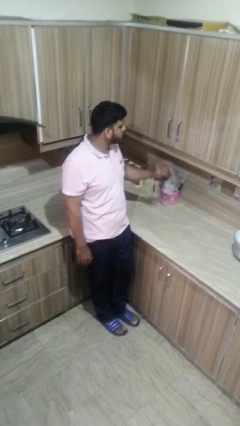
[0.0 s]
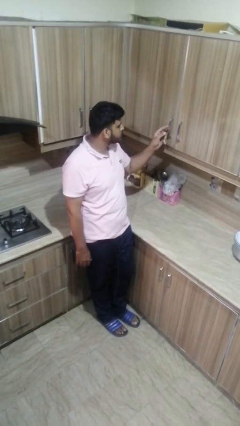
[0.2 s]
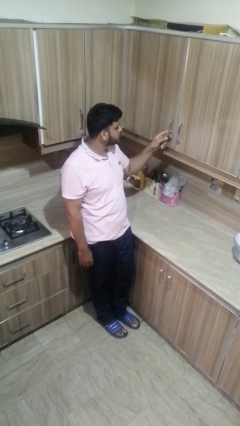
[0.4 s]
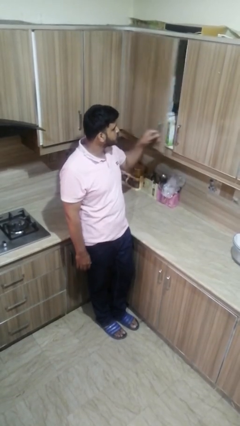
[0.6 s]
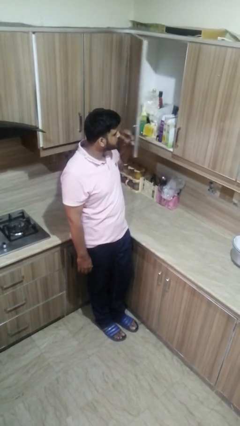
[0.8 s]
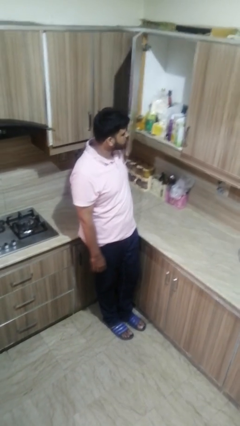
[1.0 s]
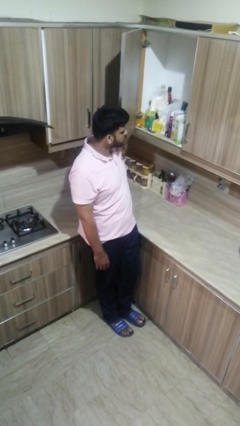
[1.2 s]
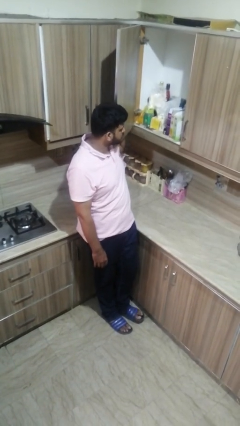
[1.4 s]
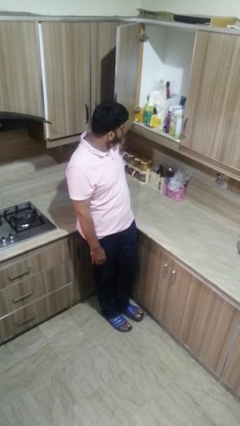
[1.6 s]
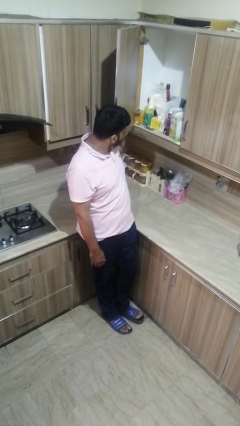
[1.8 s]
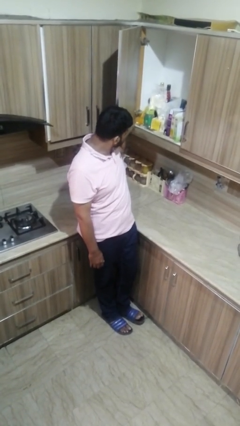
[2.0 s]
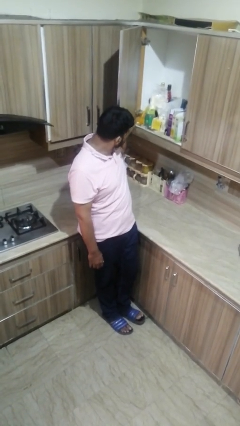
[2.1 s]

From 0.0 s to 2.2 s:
person opens cabinet

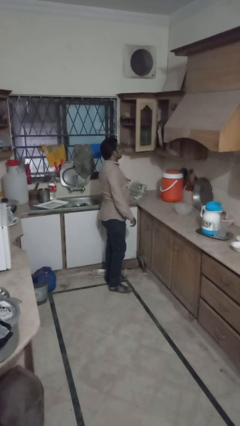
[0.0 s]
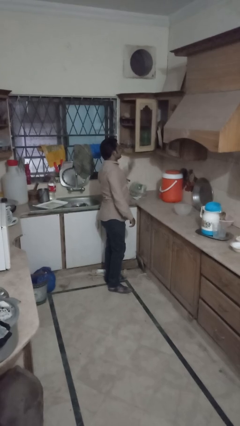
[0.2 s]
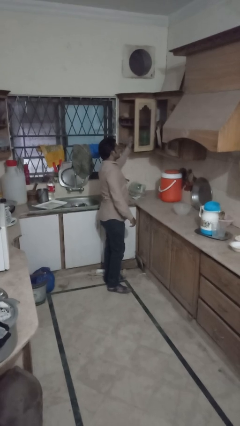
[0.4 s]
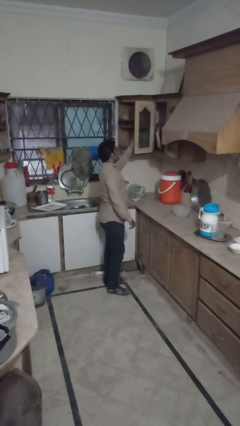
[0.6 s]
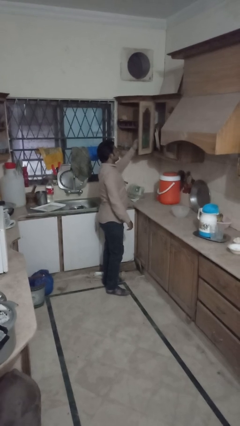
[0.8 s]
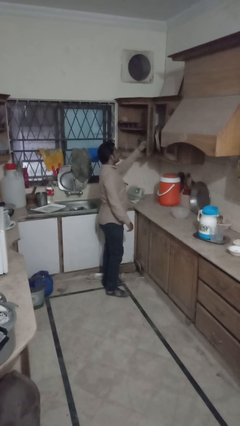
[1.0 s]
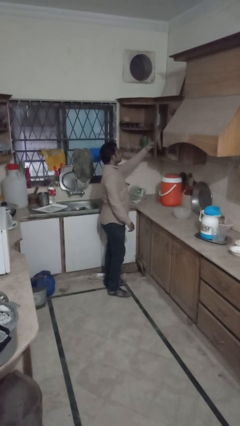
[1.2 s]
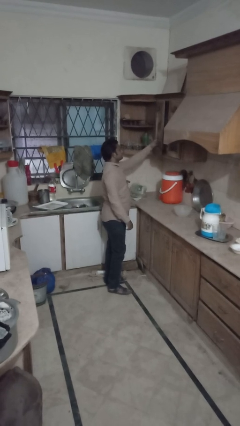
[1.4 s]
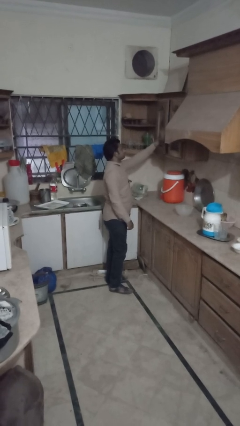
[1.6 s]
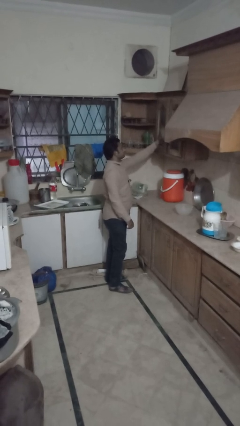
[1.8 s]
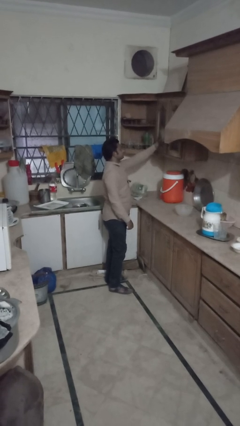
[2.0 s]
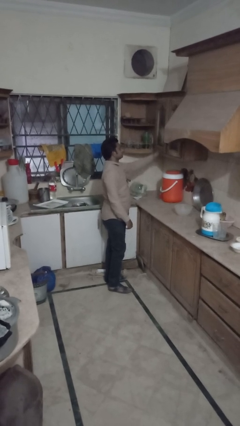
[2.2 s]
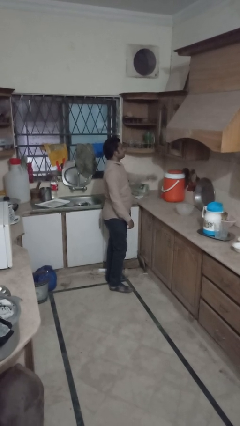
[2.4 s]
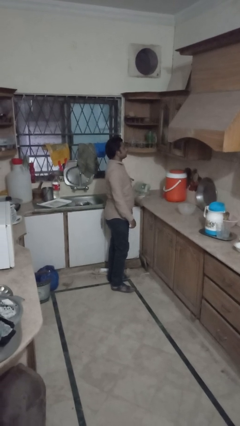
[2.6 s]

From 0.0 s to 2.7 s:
person closes cabinet

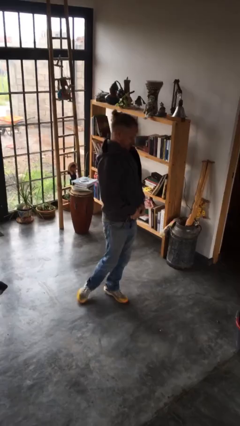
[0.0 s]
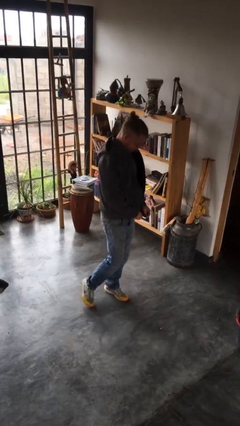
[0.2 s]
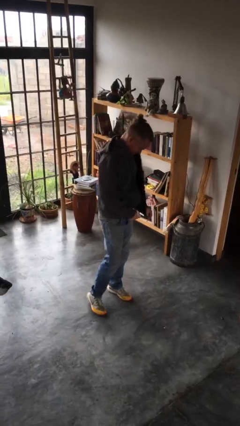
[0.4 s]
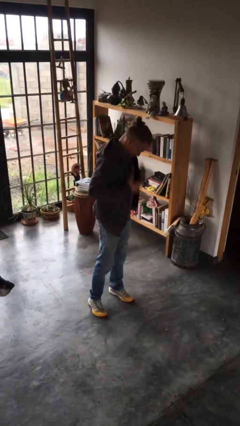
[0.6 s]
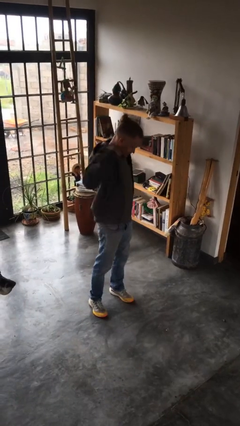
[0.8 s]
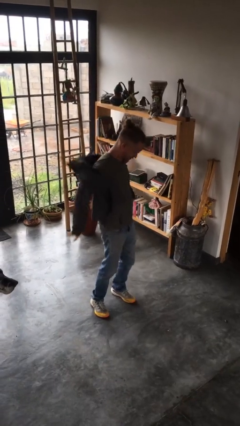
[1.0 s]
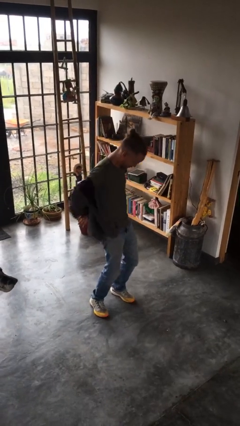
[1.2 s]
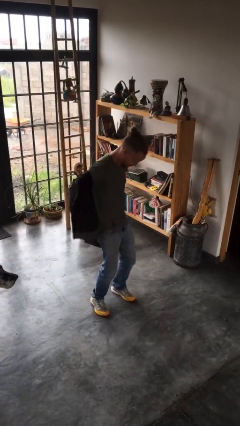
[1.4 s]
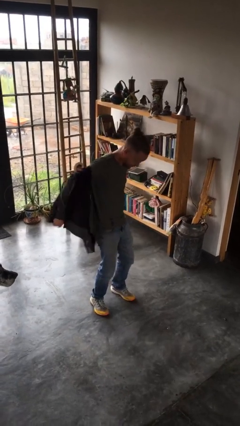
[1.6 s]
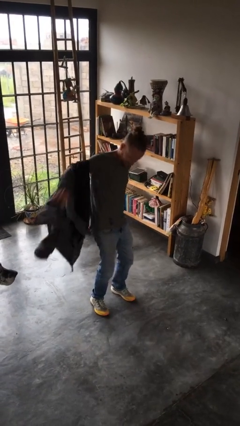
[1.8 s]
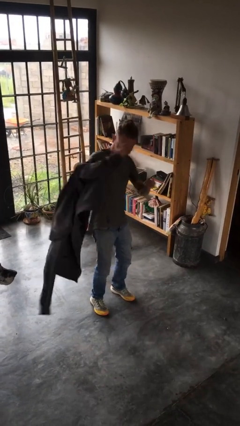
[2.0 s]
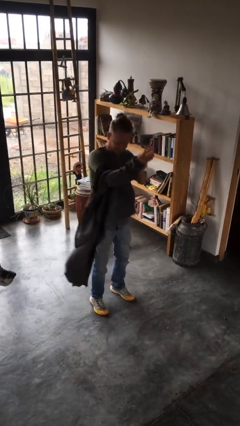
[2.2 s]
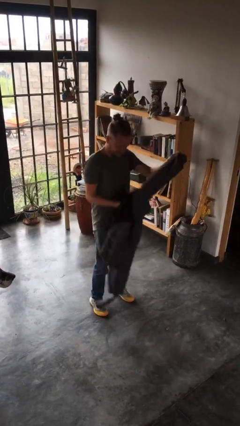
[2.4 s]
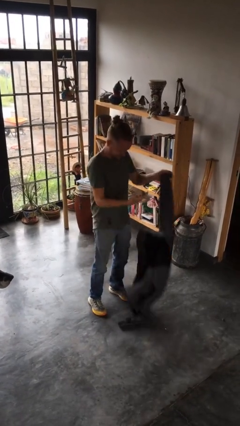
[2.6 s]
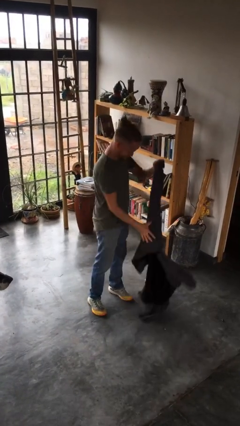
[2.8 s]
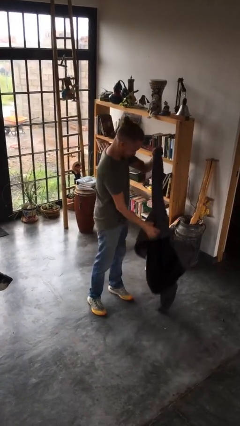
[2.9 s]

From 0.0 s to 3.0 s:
person takes off jacket

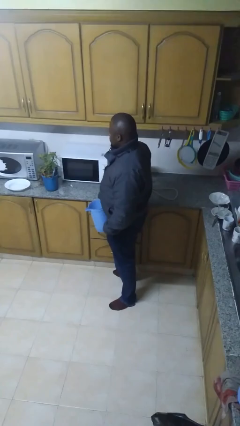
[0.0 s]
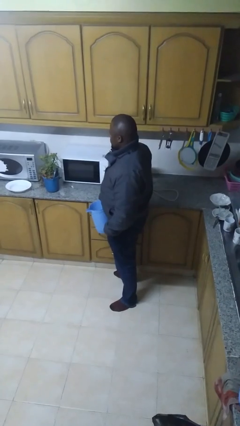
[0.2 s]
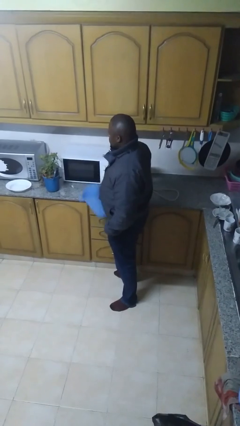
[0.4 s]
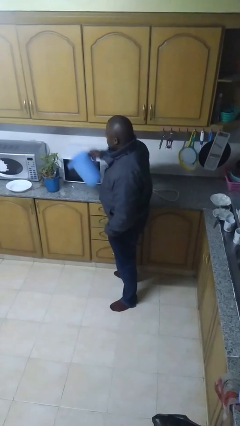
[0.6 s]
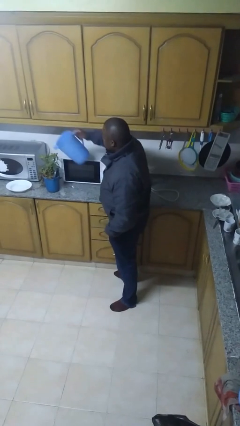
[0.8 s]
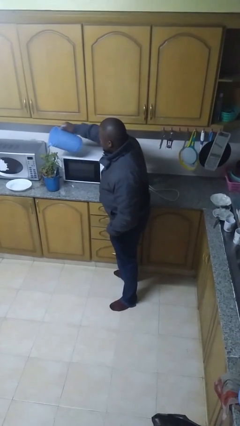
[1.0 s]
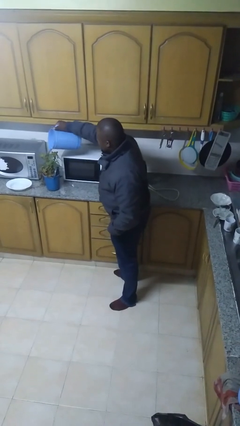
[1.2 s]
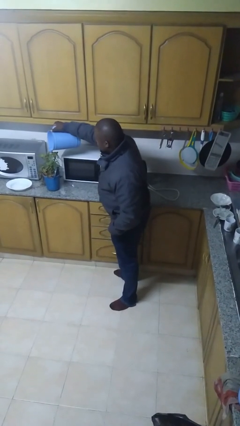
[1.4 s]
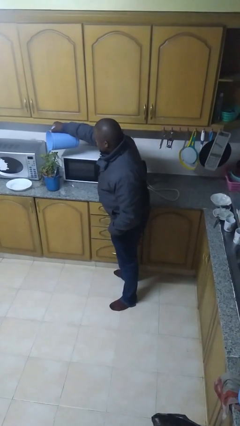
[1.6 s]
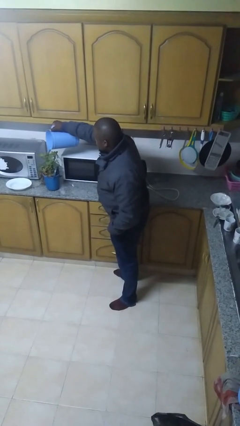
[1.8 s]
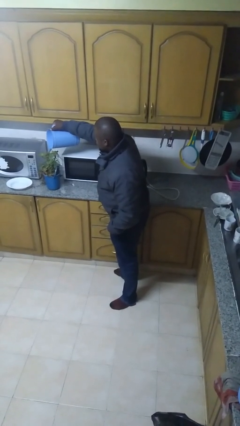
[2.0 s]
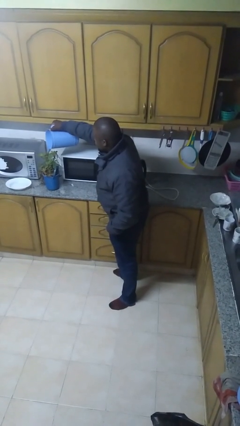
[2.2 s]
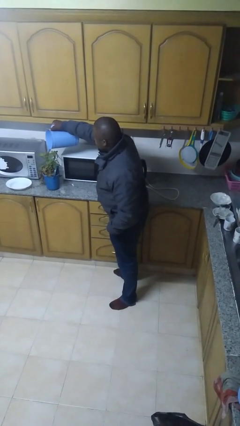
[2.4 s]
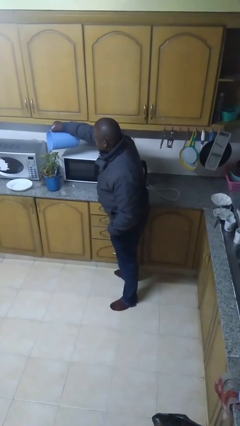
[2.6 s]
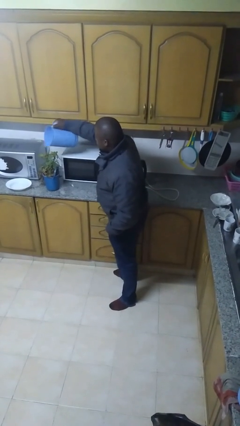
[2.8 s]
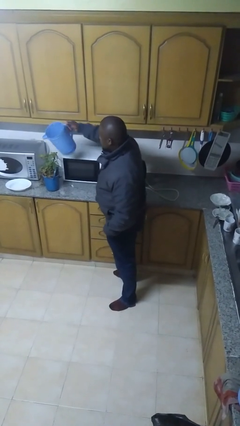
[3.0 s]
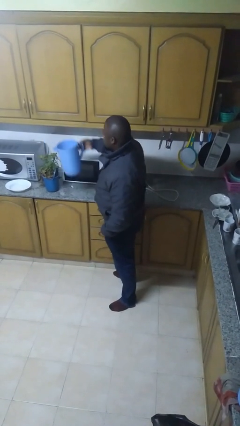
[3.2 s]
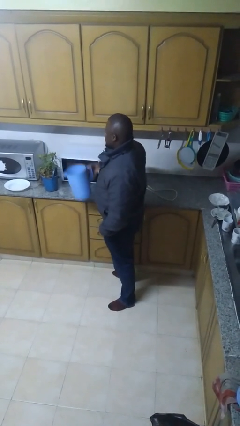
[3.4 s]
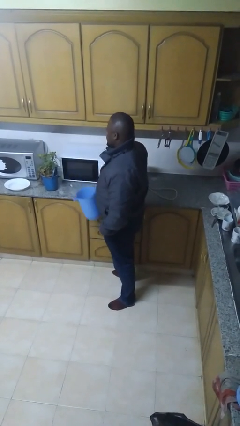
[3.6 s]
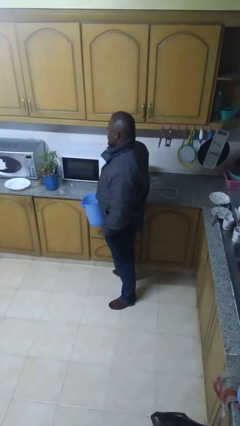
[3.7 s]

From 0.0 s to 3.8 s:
person waters houseplant

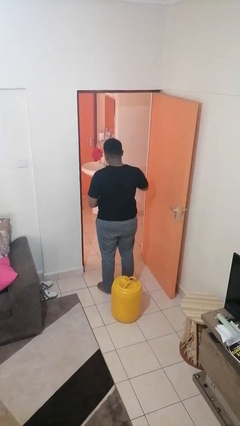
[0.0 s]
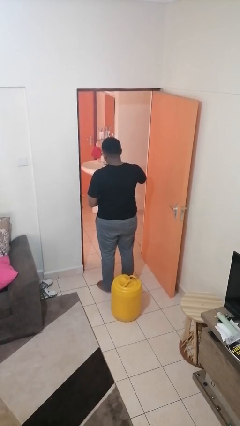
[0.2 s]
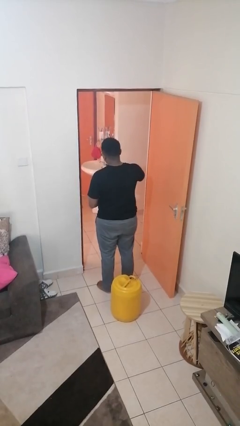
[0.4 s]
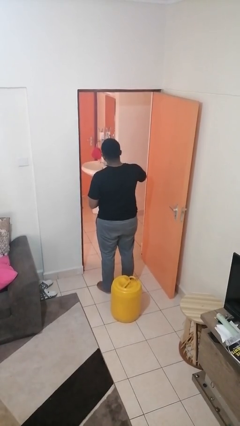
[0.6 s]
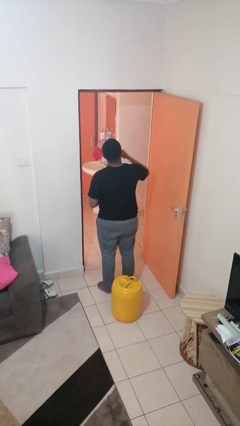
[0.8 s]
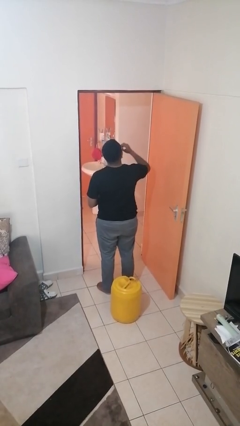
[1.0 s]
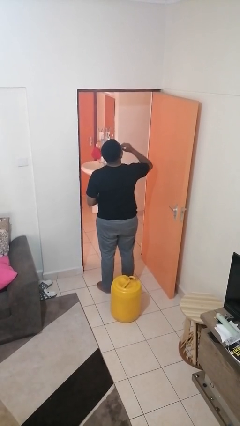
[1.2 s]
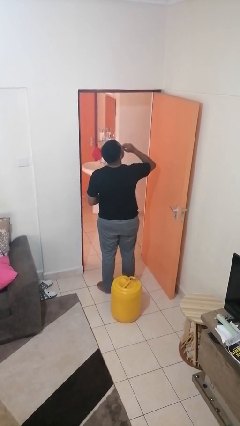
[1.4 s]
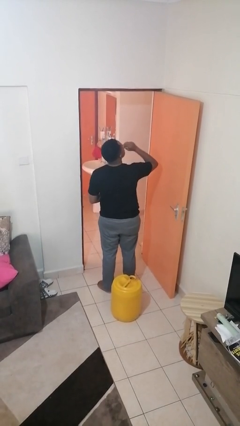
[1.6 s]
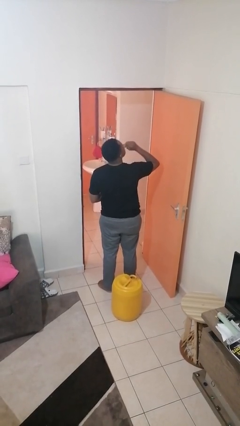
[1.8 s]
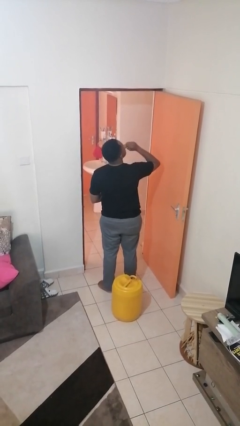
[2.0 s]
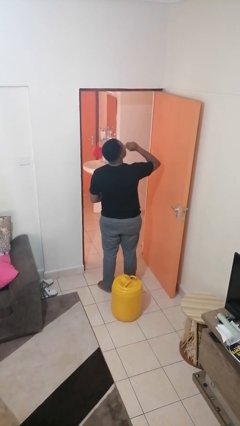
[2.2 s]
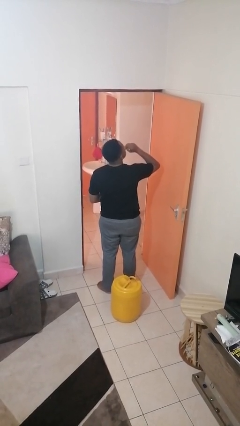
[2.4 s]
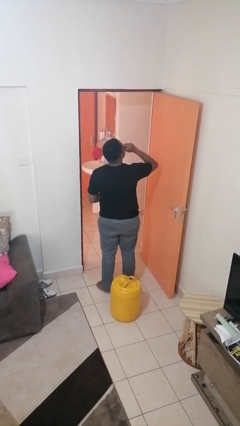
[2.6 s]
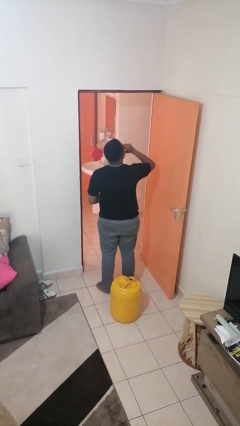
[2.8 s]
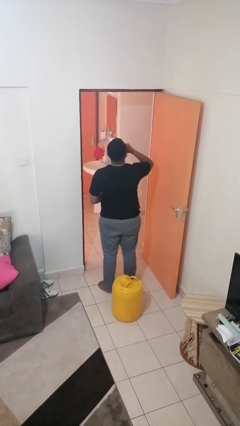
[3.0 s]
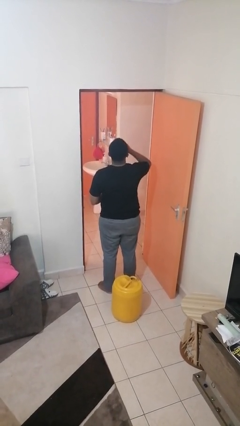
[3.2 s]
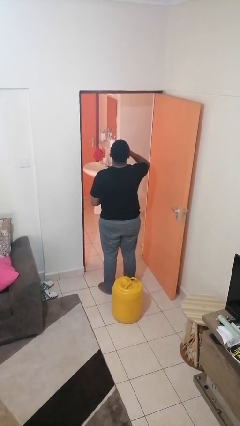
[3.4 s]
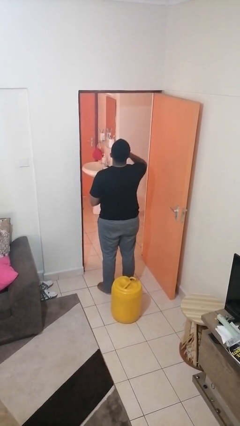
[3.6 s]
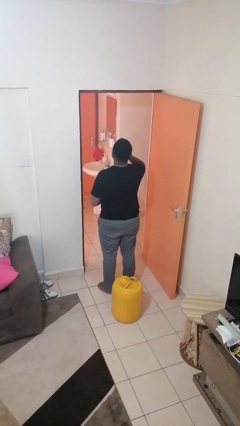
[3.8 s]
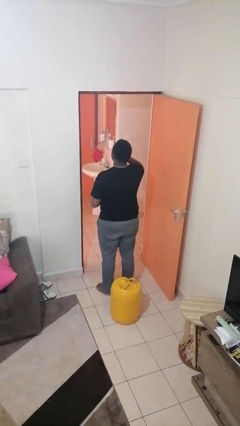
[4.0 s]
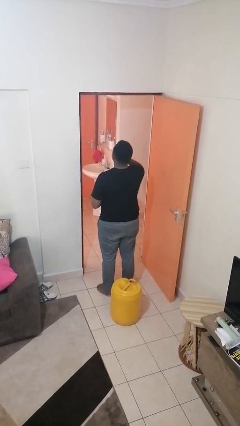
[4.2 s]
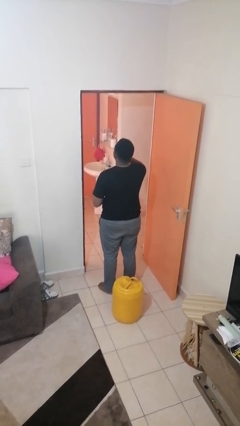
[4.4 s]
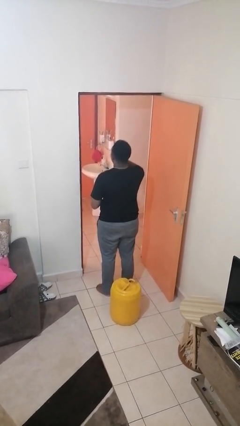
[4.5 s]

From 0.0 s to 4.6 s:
person eats snack from bag

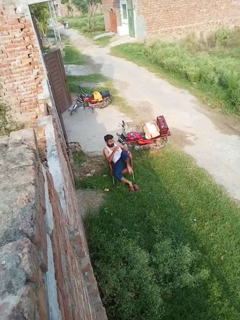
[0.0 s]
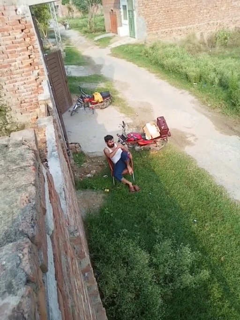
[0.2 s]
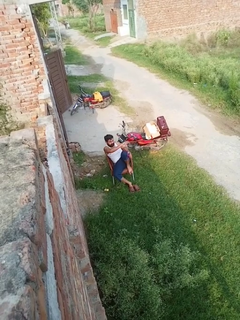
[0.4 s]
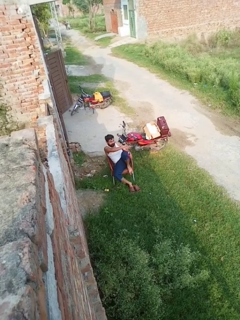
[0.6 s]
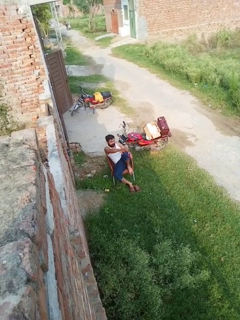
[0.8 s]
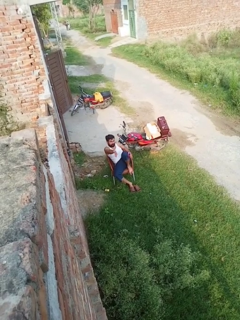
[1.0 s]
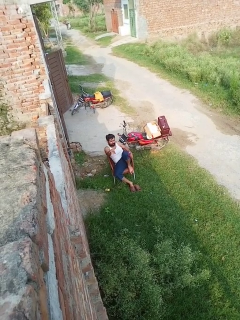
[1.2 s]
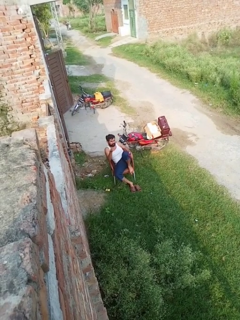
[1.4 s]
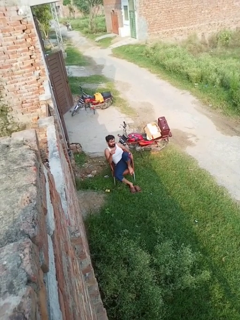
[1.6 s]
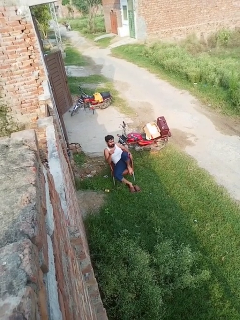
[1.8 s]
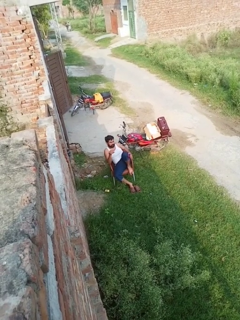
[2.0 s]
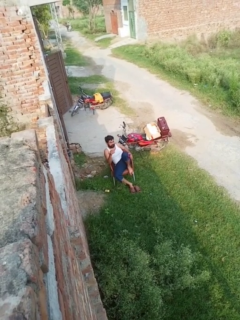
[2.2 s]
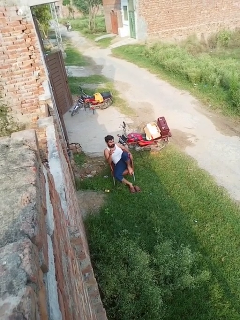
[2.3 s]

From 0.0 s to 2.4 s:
person gestures swipe right
